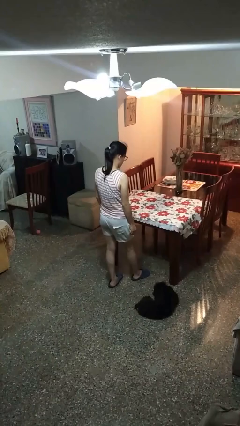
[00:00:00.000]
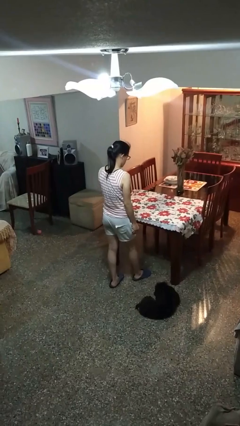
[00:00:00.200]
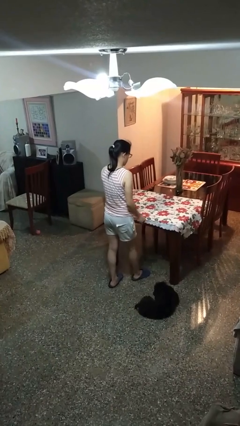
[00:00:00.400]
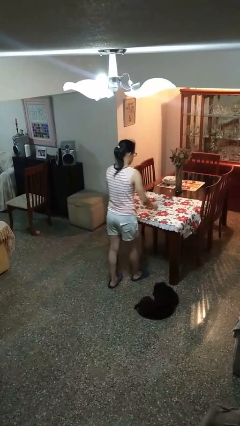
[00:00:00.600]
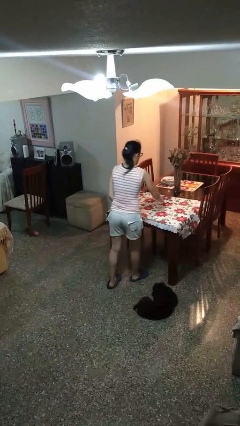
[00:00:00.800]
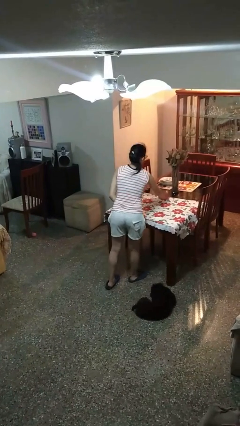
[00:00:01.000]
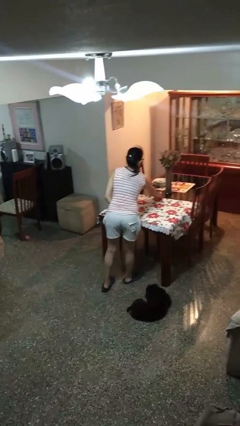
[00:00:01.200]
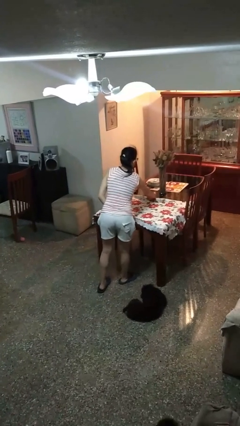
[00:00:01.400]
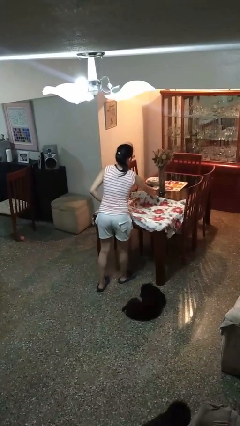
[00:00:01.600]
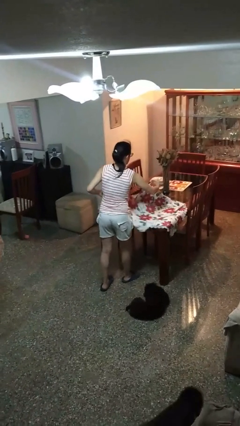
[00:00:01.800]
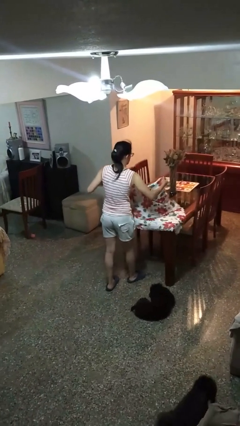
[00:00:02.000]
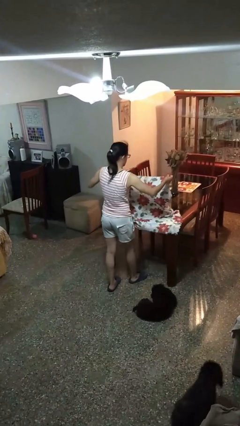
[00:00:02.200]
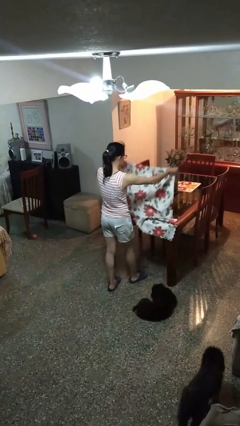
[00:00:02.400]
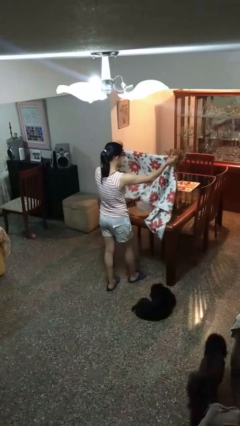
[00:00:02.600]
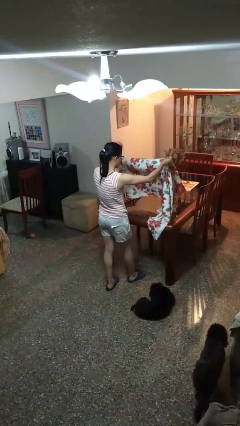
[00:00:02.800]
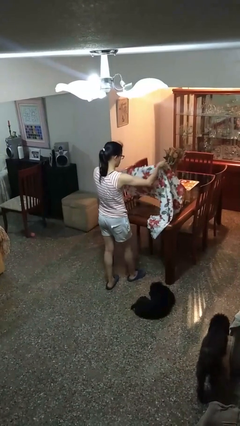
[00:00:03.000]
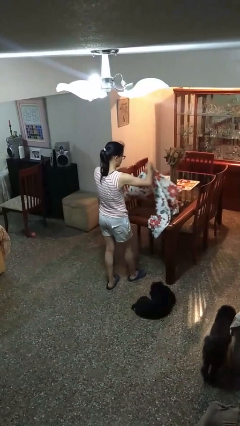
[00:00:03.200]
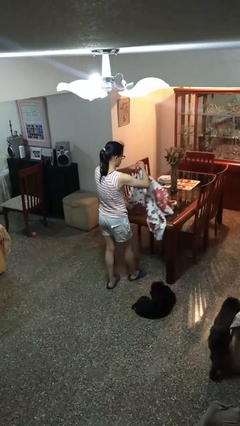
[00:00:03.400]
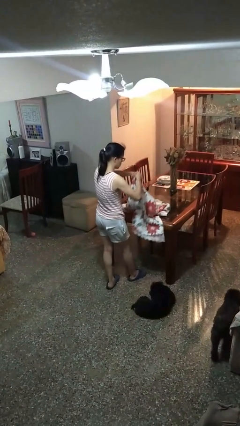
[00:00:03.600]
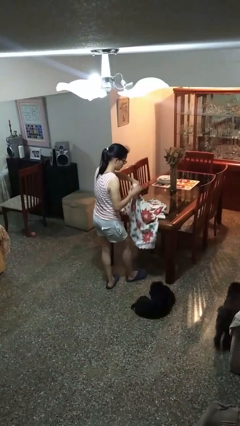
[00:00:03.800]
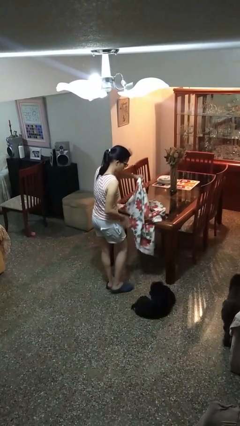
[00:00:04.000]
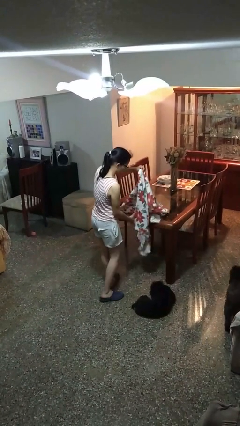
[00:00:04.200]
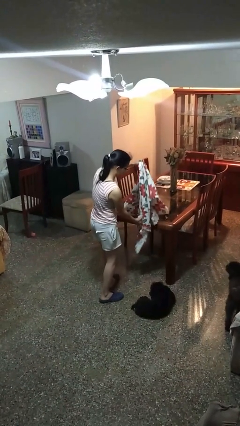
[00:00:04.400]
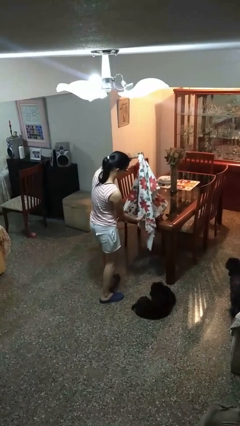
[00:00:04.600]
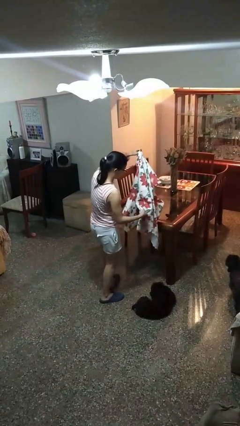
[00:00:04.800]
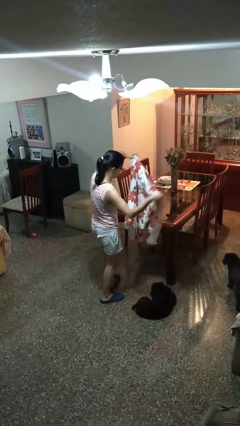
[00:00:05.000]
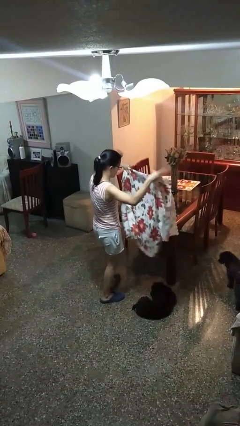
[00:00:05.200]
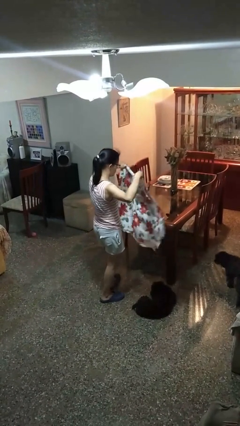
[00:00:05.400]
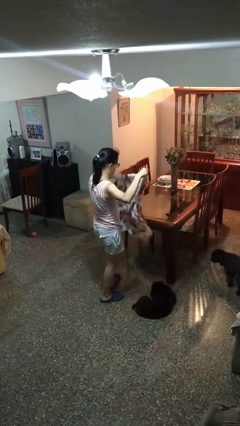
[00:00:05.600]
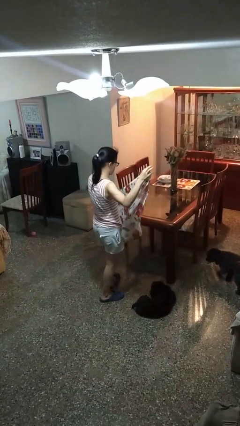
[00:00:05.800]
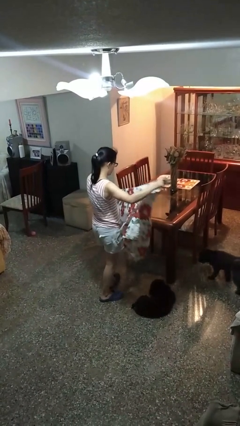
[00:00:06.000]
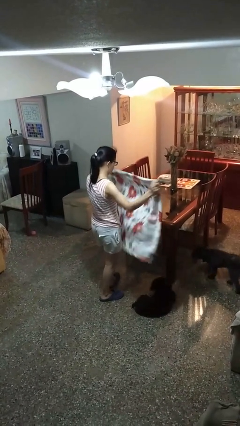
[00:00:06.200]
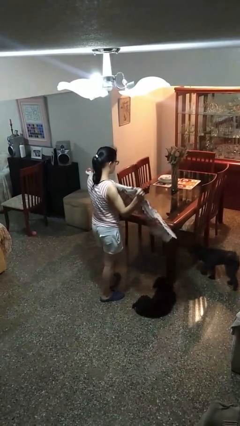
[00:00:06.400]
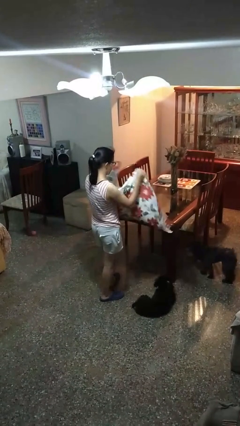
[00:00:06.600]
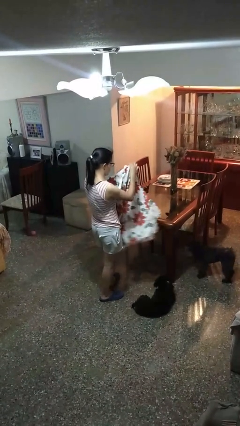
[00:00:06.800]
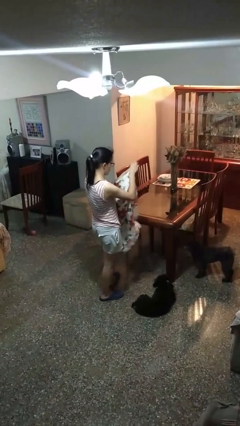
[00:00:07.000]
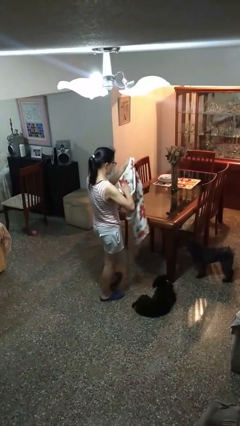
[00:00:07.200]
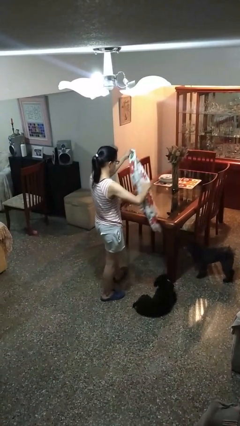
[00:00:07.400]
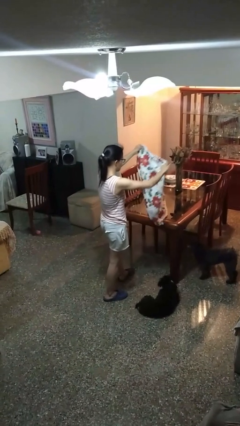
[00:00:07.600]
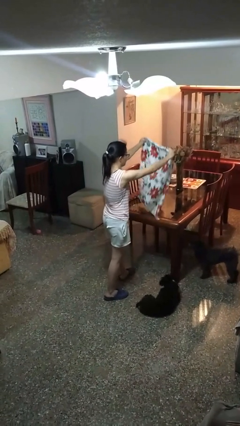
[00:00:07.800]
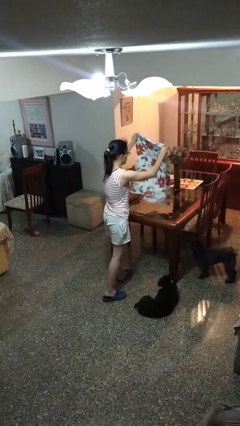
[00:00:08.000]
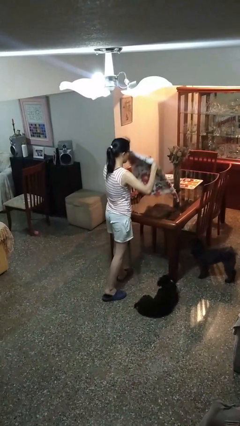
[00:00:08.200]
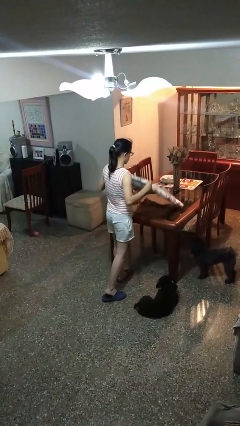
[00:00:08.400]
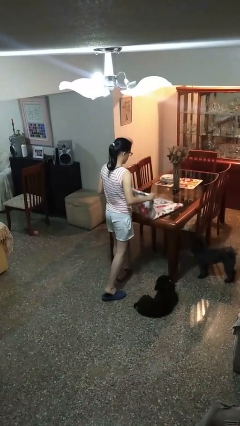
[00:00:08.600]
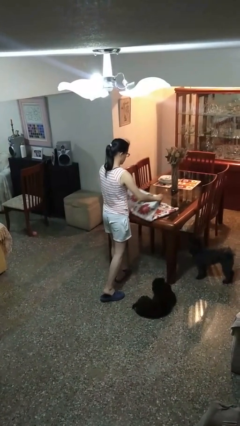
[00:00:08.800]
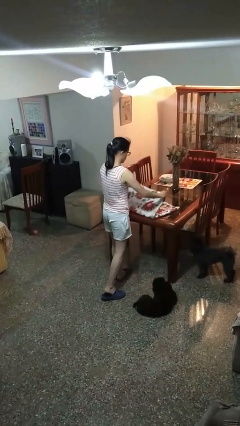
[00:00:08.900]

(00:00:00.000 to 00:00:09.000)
person folds tablecloth

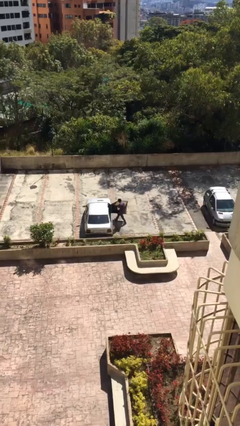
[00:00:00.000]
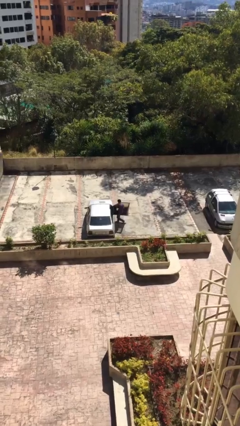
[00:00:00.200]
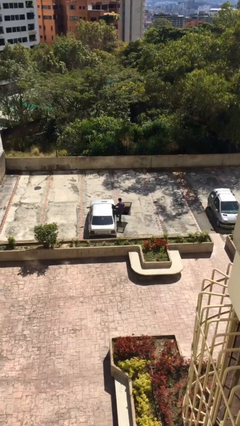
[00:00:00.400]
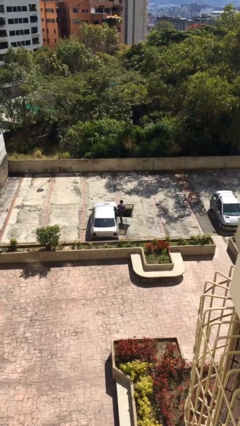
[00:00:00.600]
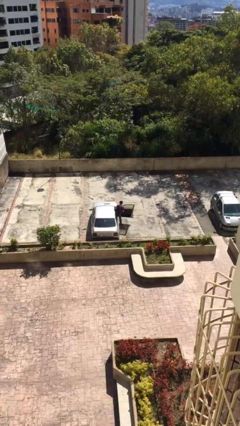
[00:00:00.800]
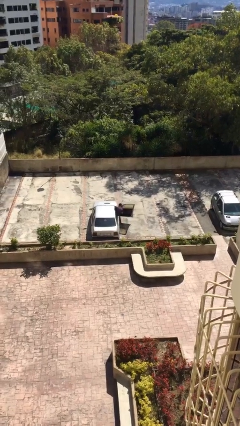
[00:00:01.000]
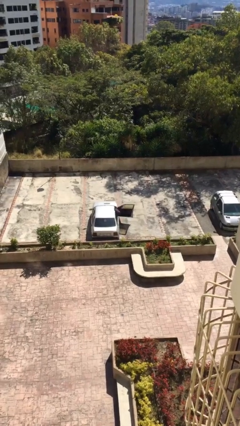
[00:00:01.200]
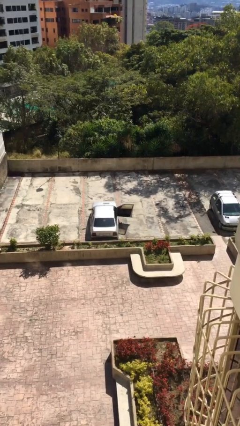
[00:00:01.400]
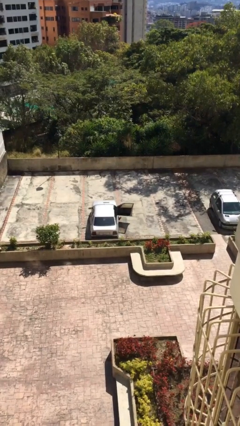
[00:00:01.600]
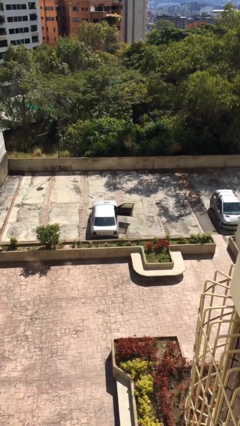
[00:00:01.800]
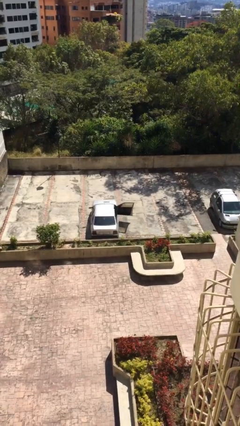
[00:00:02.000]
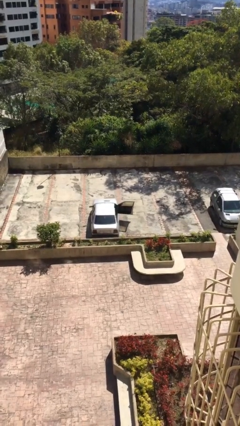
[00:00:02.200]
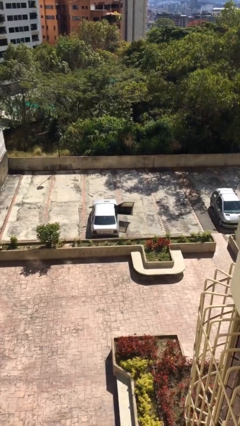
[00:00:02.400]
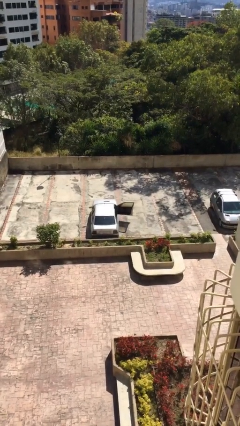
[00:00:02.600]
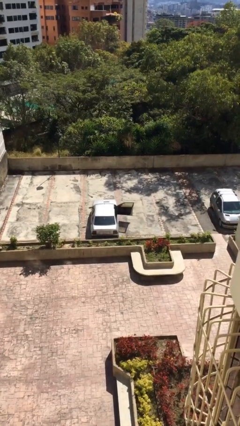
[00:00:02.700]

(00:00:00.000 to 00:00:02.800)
person enters car

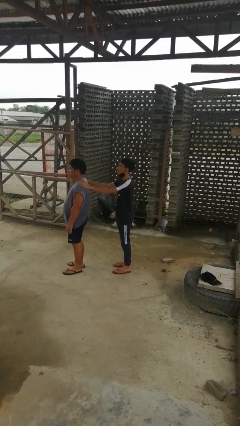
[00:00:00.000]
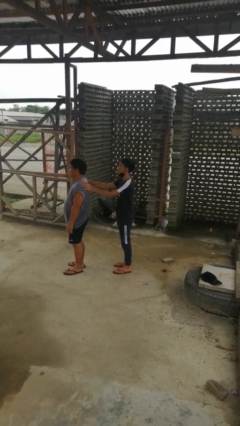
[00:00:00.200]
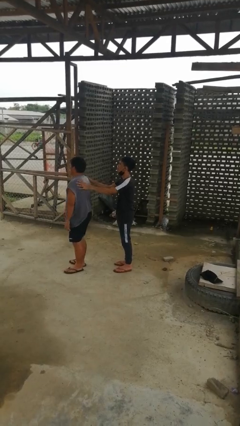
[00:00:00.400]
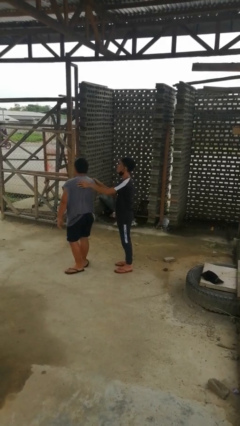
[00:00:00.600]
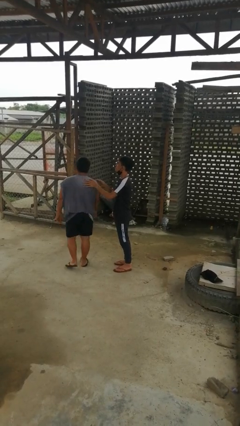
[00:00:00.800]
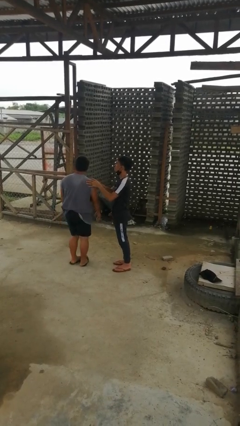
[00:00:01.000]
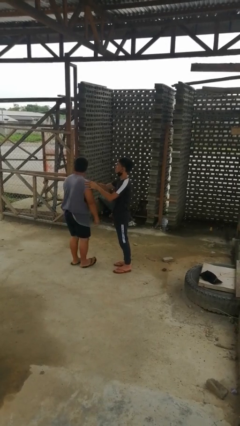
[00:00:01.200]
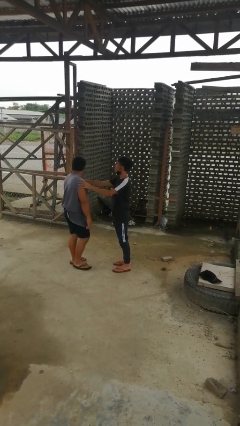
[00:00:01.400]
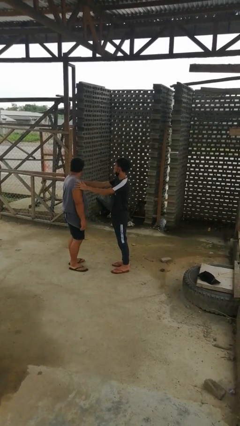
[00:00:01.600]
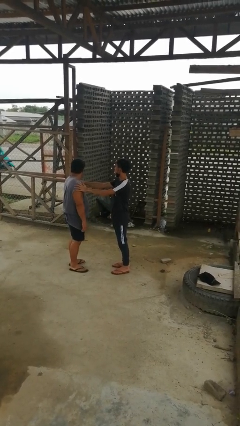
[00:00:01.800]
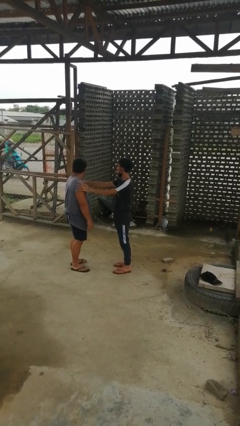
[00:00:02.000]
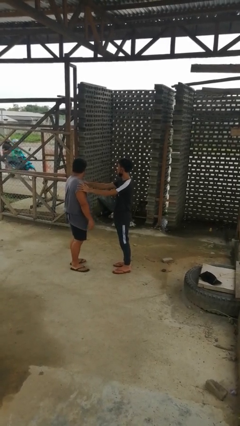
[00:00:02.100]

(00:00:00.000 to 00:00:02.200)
person spins person around

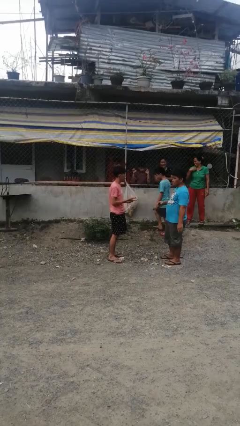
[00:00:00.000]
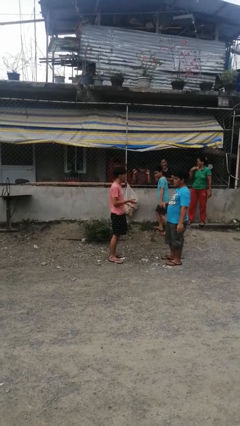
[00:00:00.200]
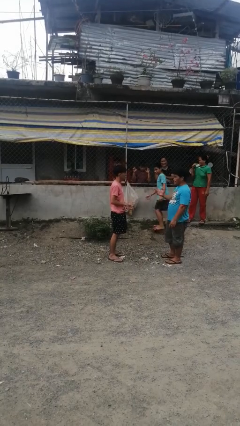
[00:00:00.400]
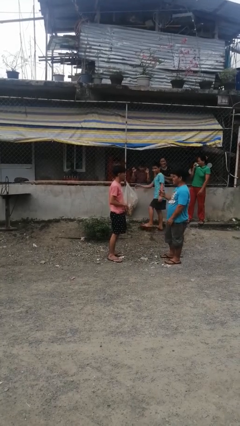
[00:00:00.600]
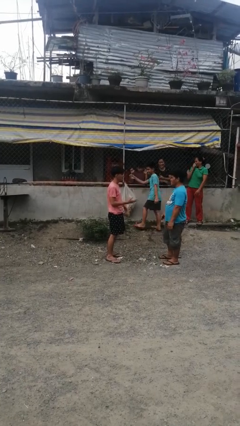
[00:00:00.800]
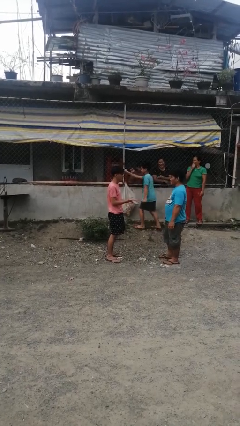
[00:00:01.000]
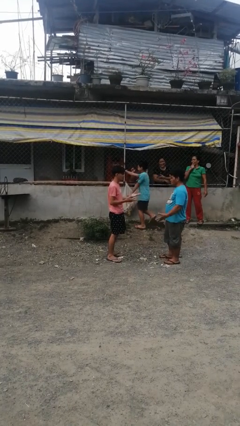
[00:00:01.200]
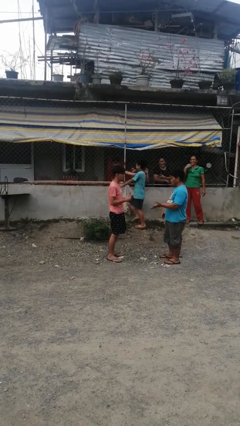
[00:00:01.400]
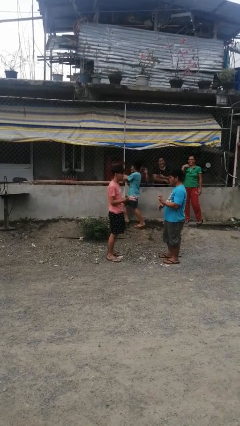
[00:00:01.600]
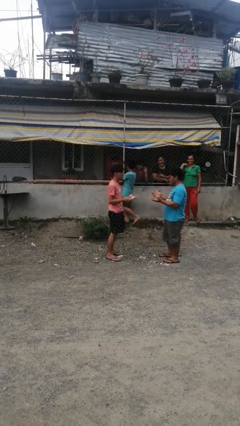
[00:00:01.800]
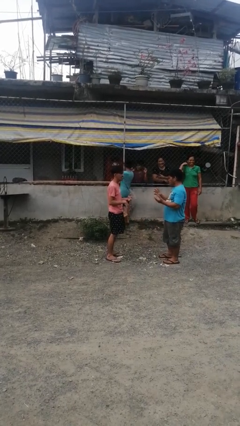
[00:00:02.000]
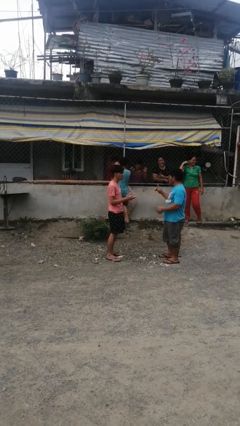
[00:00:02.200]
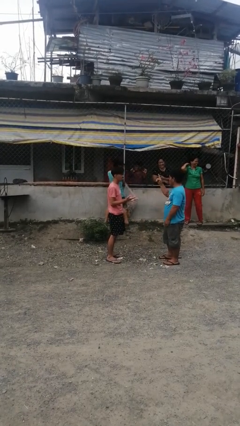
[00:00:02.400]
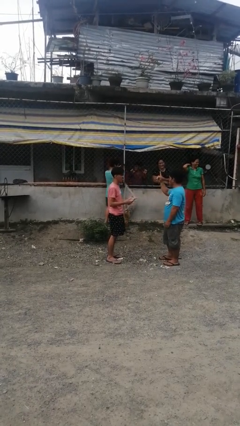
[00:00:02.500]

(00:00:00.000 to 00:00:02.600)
person talks to person

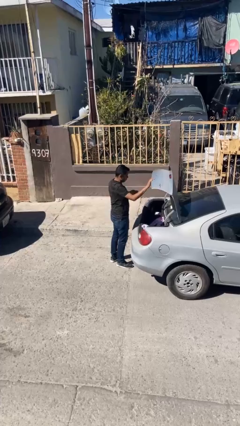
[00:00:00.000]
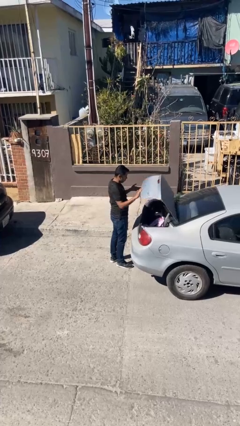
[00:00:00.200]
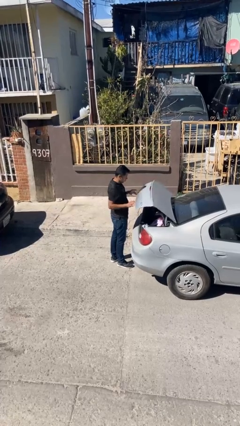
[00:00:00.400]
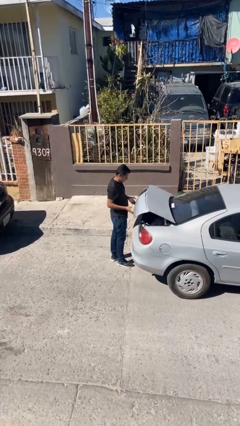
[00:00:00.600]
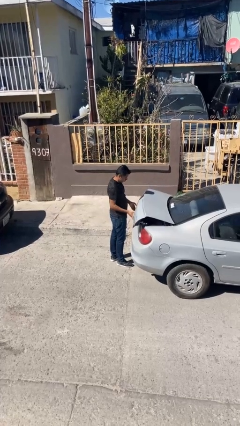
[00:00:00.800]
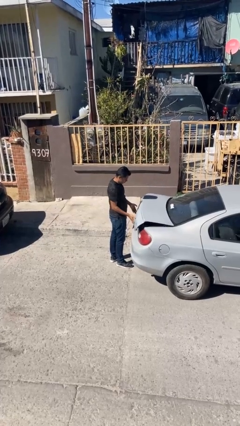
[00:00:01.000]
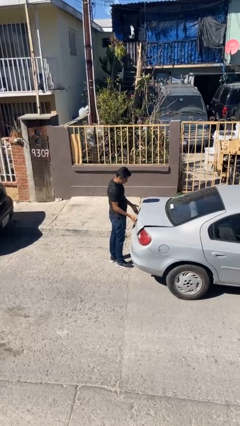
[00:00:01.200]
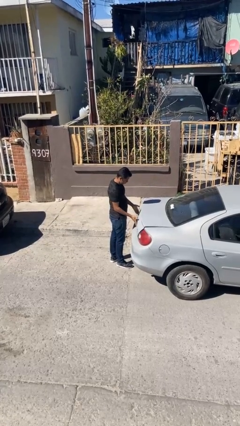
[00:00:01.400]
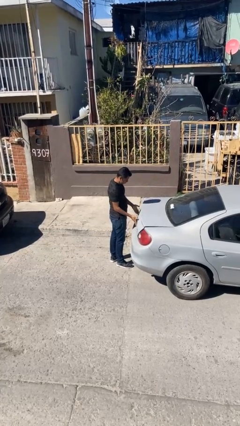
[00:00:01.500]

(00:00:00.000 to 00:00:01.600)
person closes car trunk
